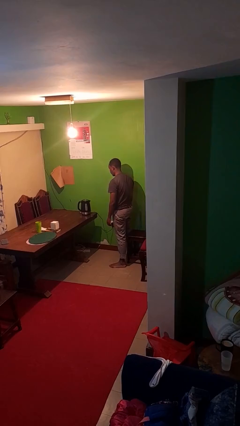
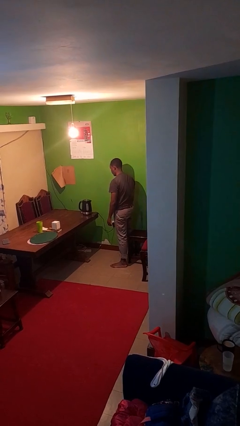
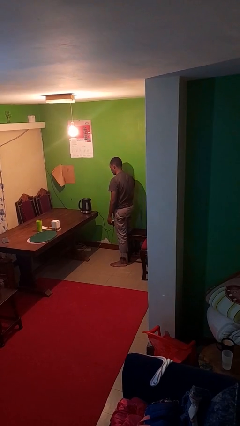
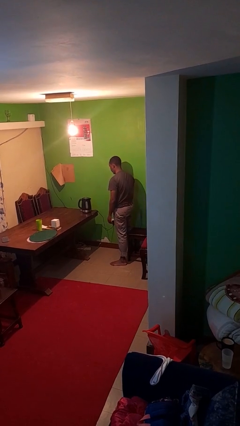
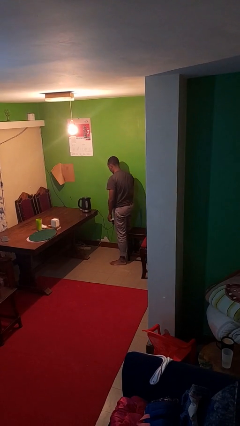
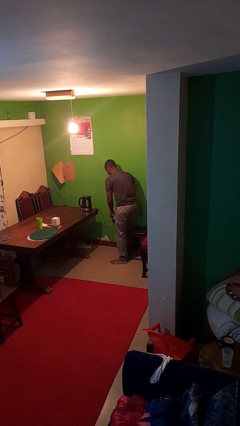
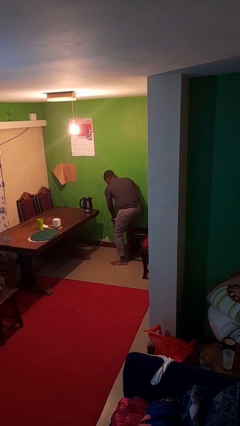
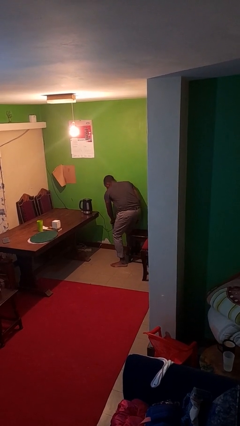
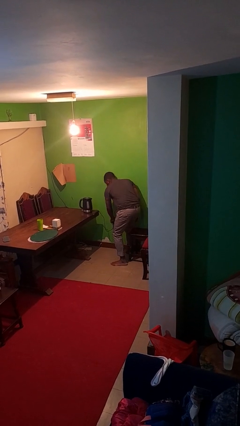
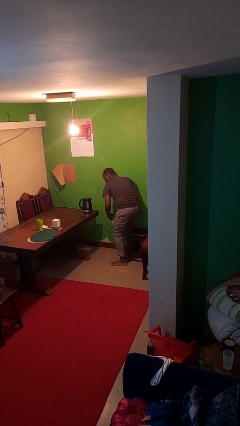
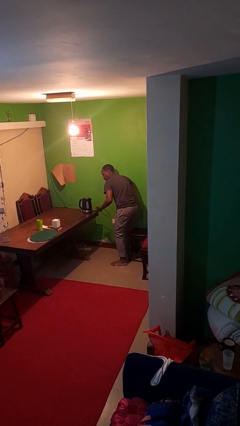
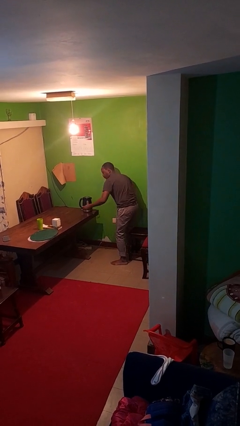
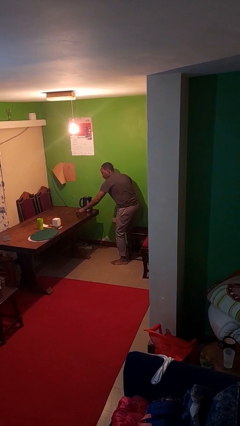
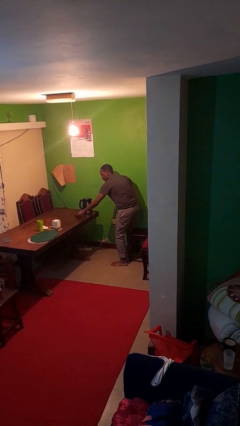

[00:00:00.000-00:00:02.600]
person unplugs from electrical socket

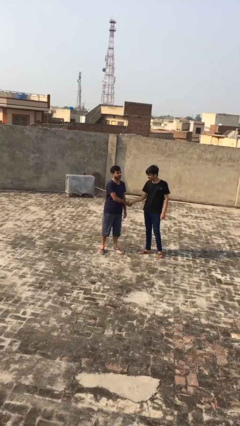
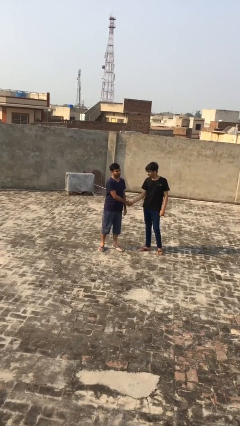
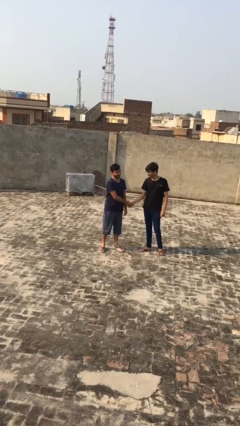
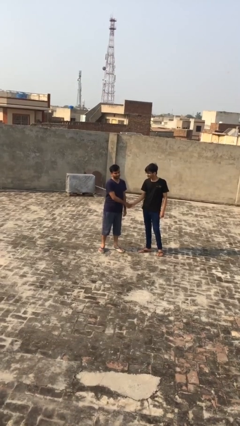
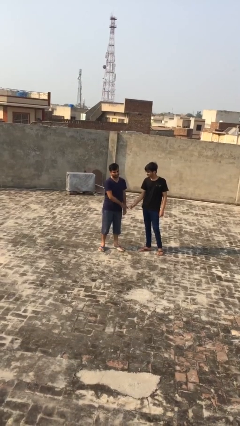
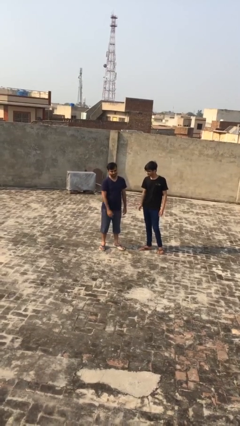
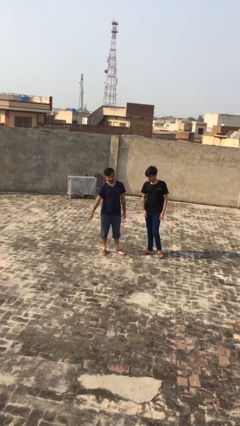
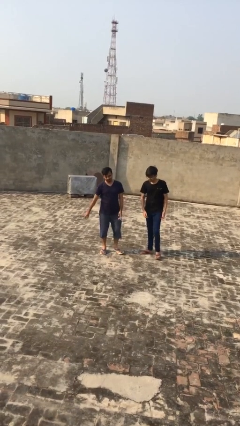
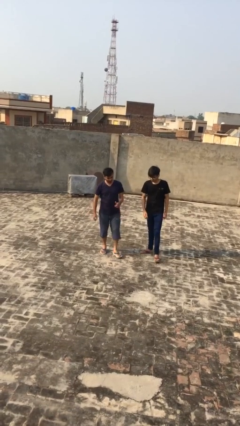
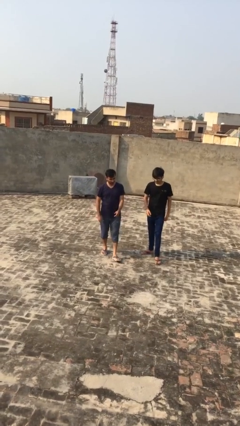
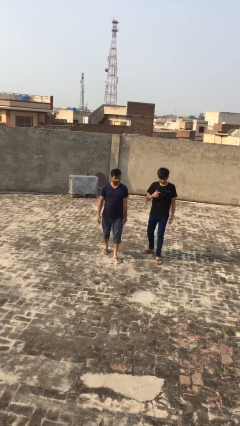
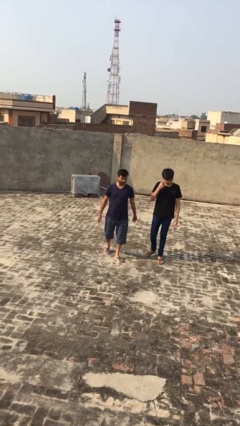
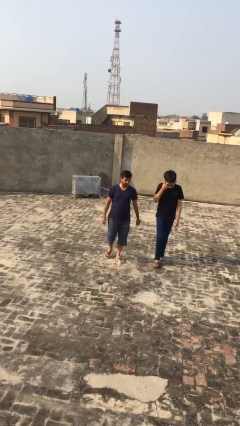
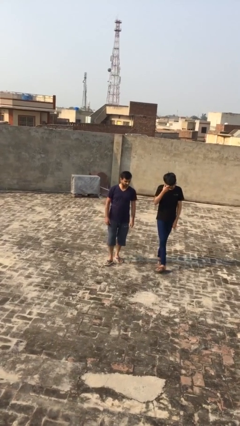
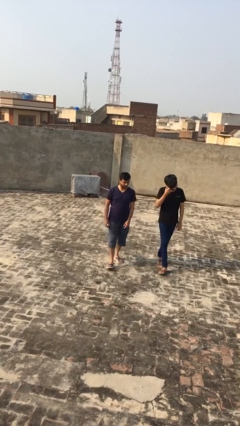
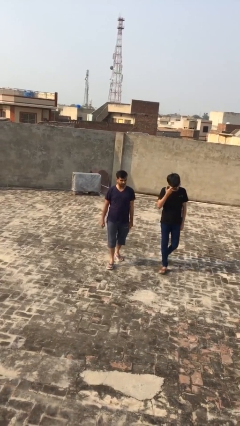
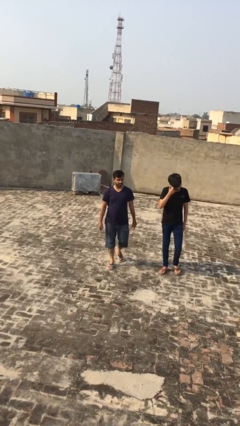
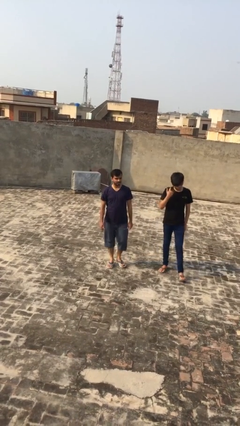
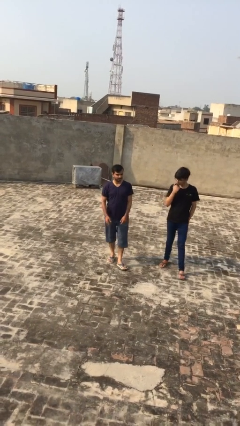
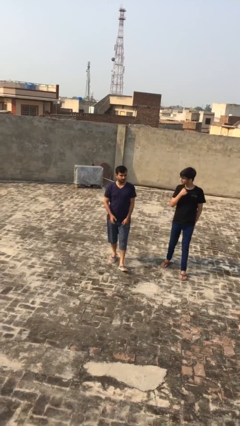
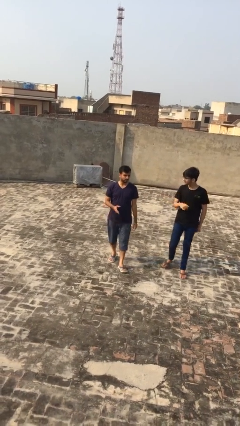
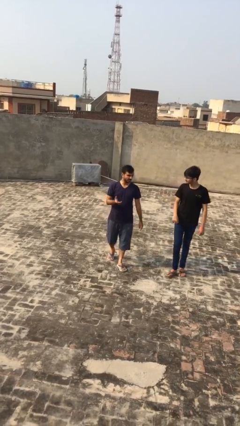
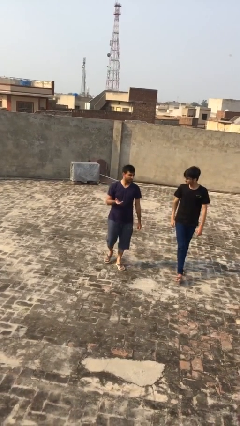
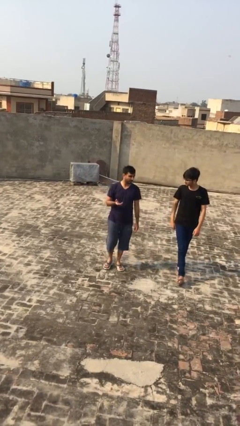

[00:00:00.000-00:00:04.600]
person talks to person

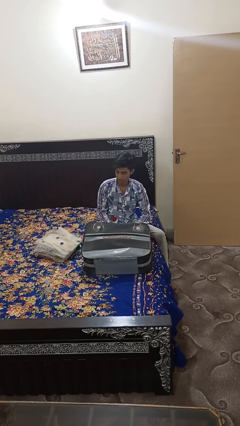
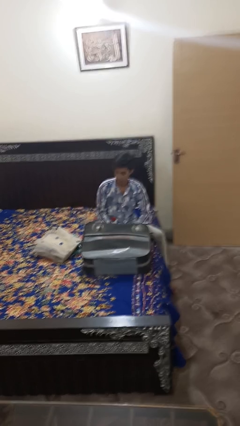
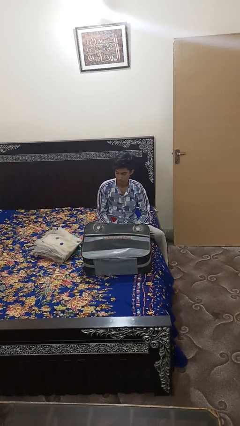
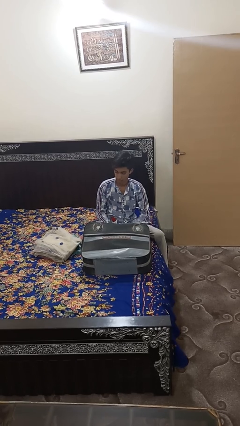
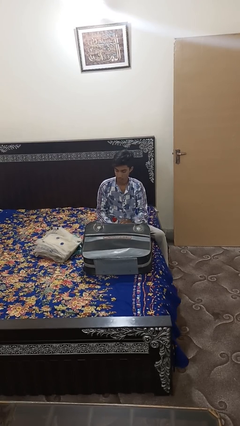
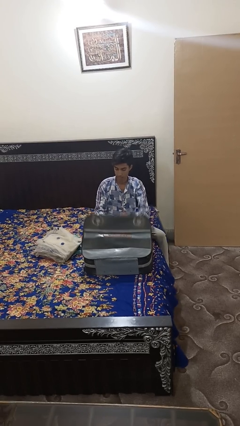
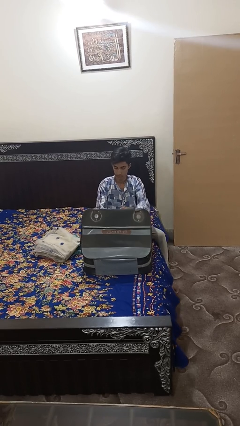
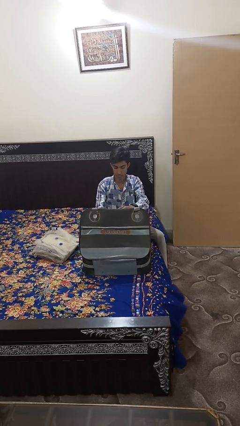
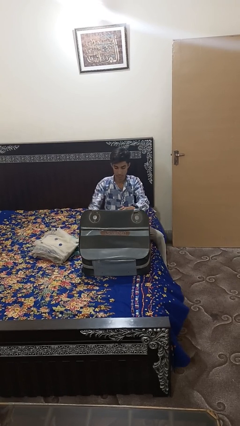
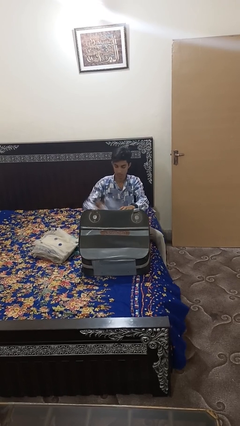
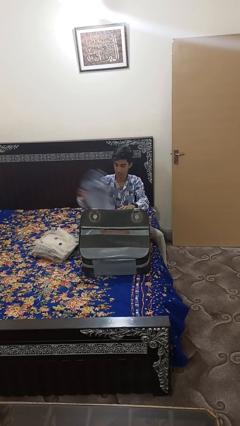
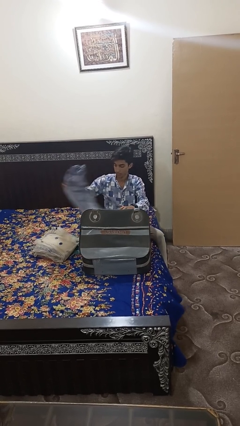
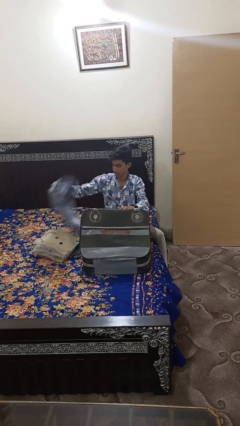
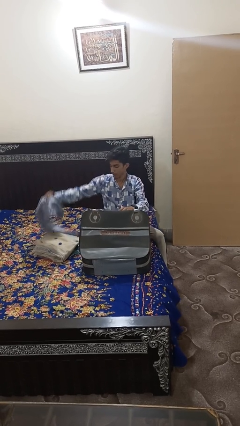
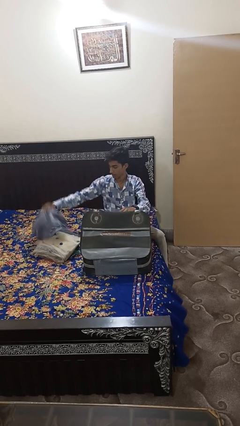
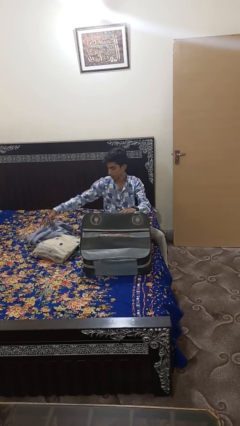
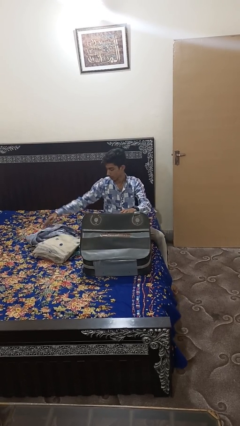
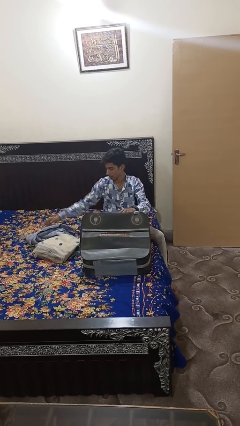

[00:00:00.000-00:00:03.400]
person unloads clothes from suitcase

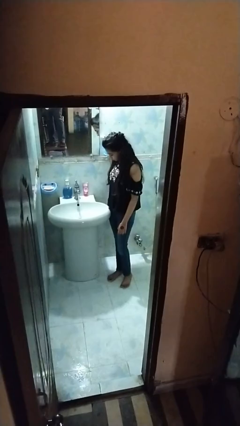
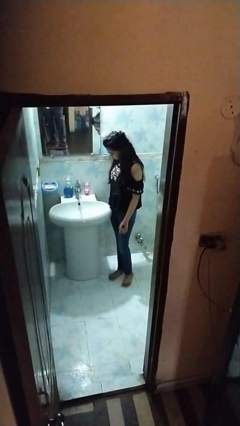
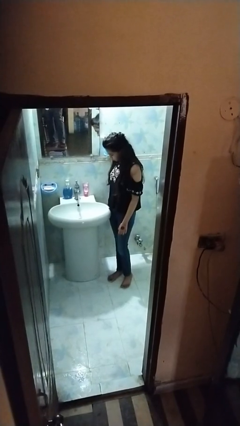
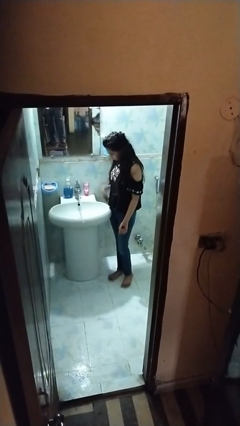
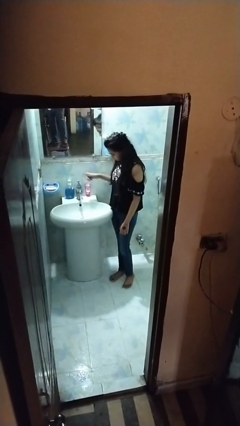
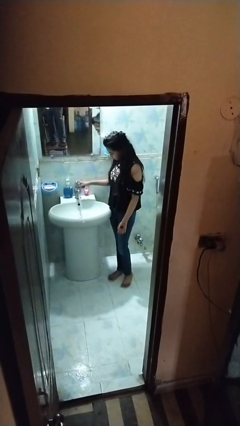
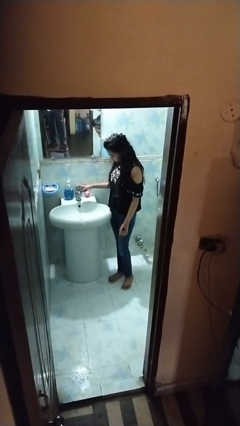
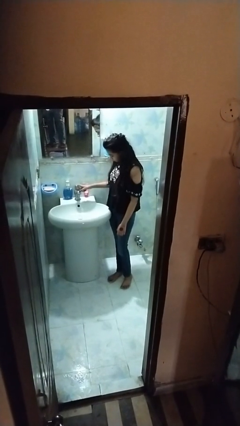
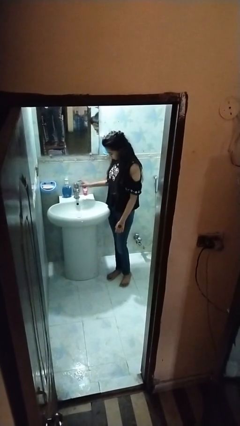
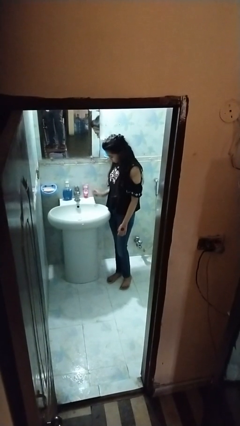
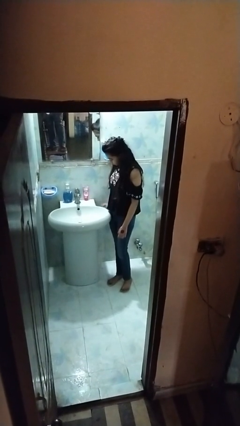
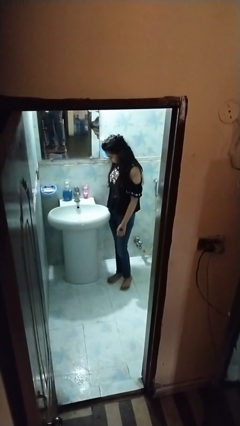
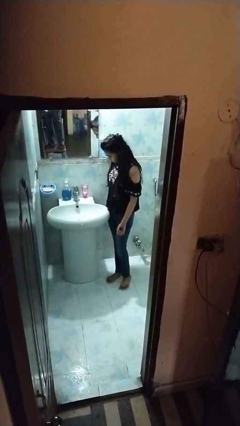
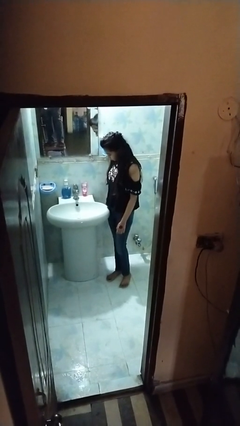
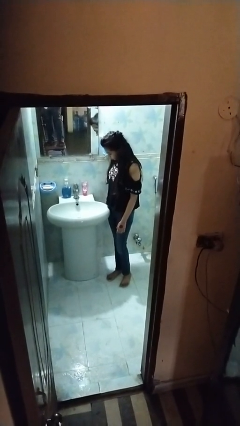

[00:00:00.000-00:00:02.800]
person turns off faucet

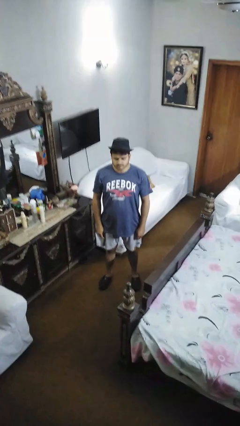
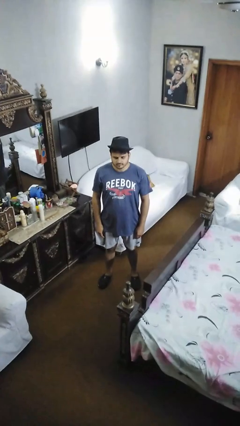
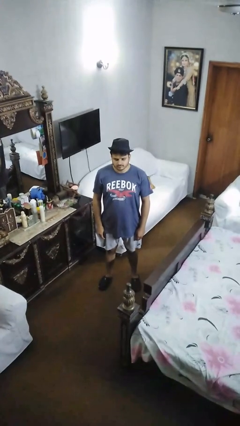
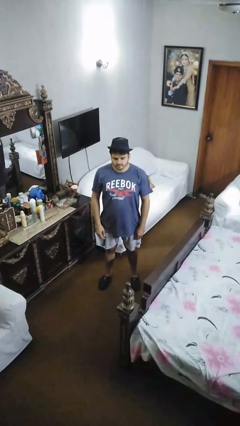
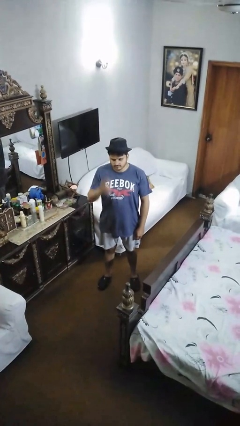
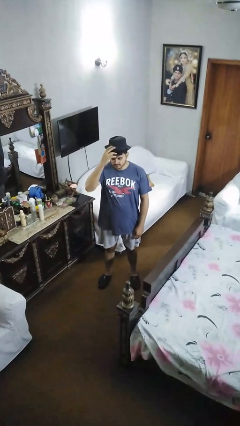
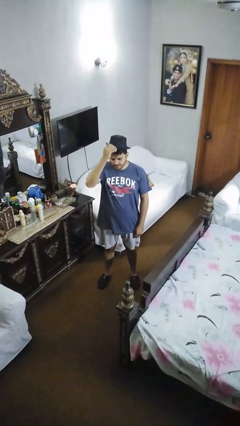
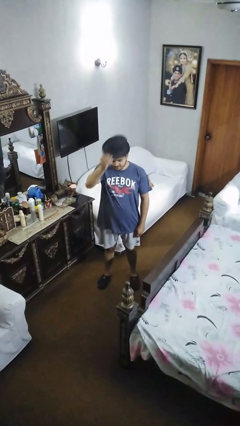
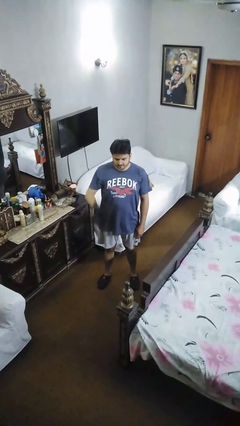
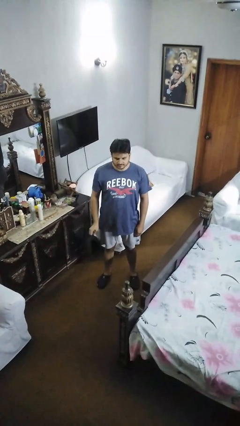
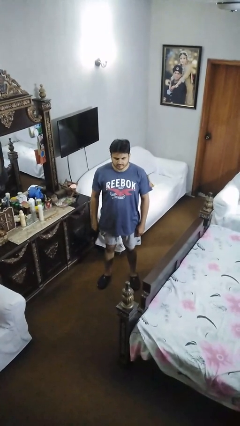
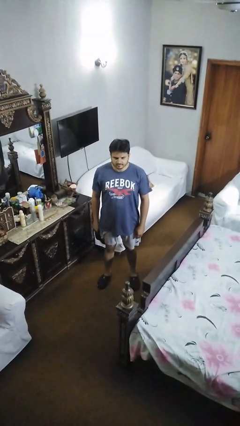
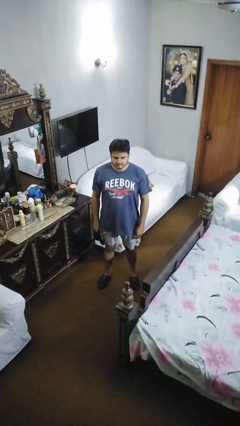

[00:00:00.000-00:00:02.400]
person takes off hat

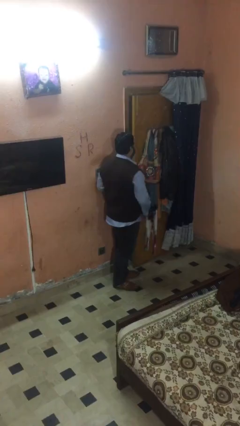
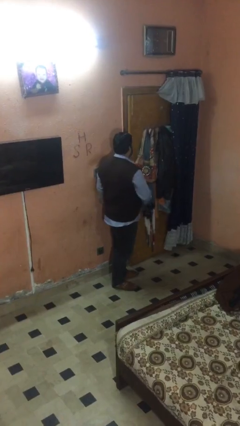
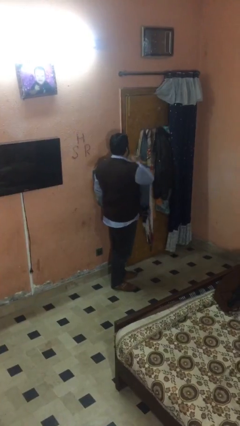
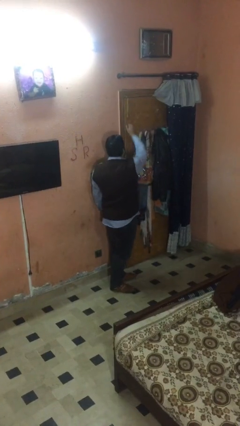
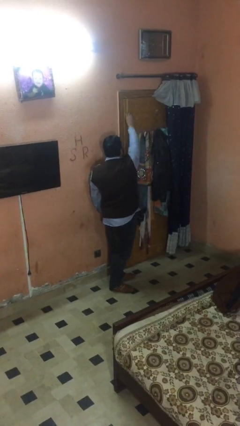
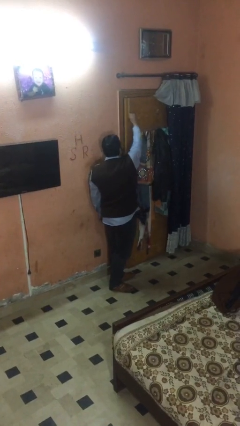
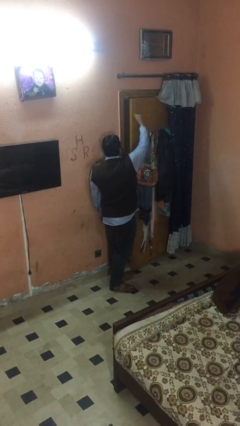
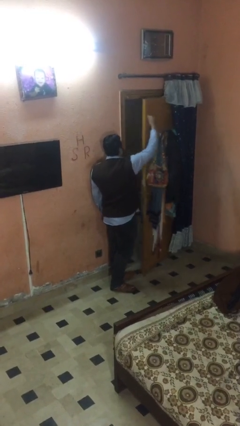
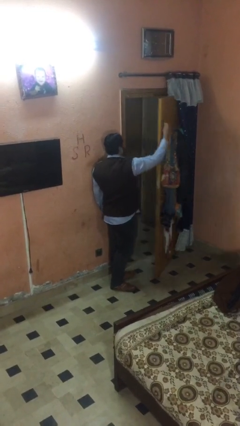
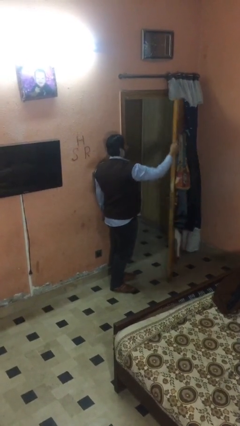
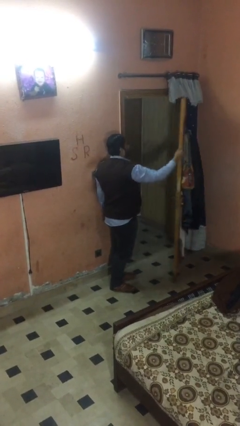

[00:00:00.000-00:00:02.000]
person opens facility door
